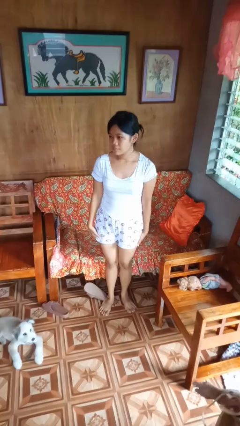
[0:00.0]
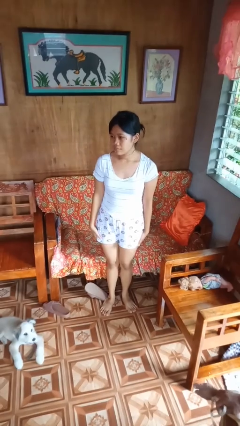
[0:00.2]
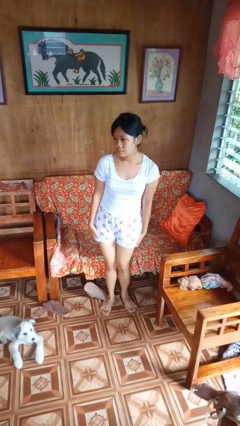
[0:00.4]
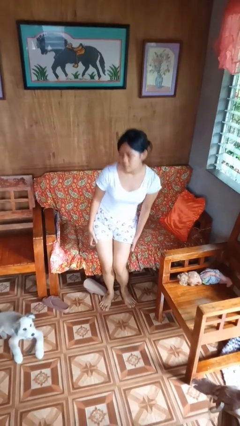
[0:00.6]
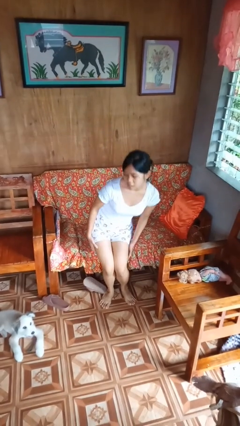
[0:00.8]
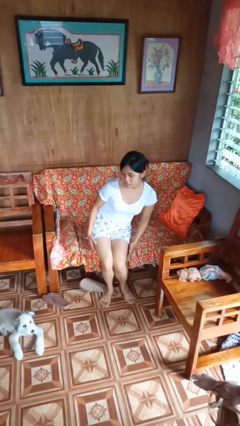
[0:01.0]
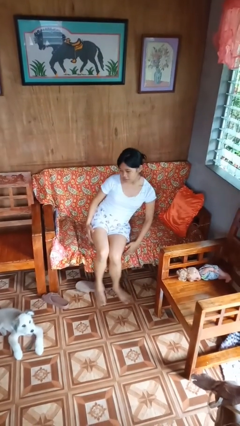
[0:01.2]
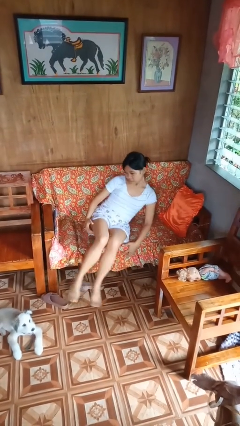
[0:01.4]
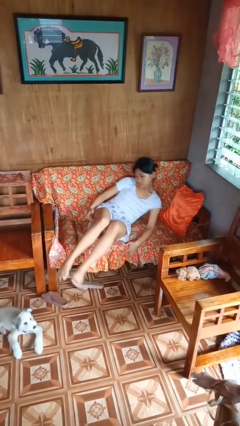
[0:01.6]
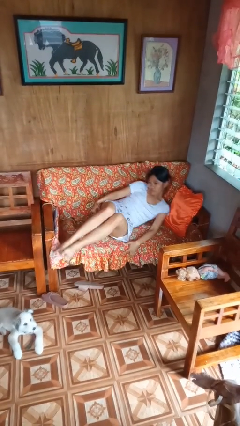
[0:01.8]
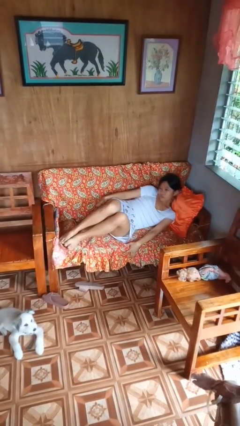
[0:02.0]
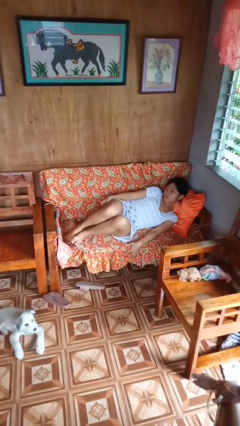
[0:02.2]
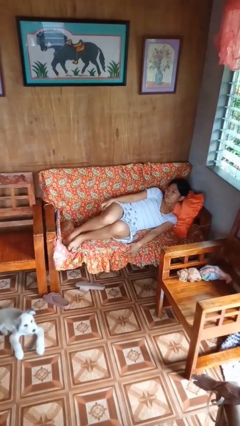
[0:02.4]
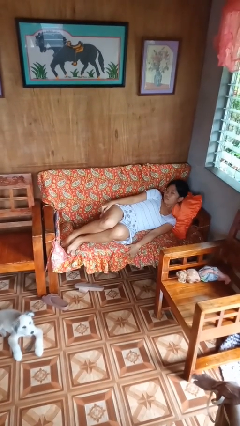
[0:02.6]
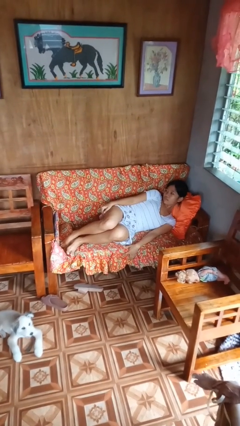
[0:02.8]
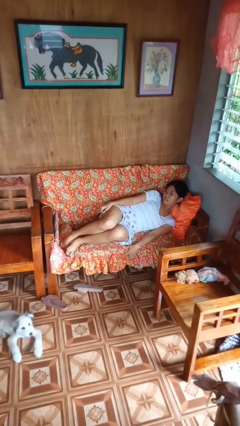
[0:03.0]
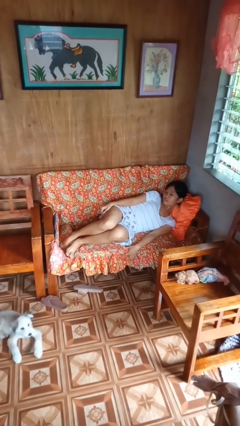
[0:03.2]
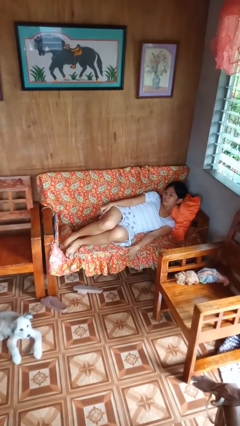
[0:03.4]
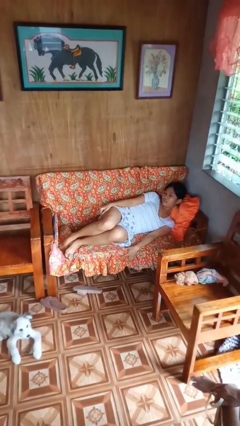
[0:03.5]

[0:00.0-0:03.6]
person lies down on couch

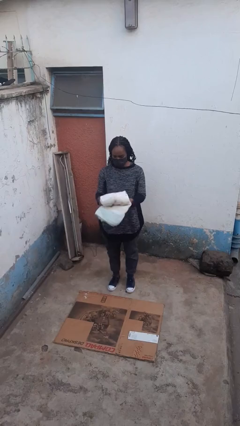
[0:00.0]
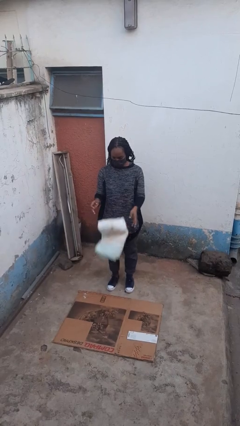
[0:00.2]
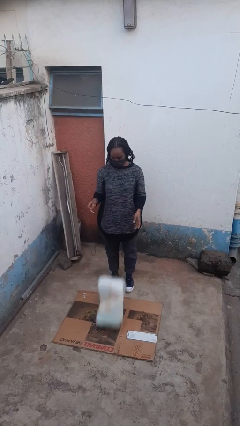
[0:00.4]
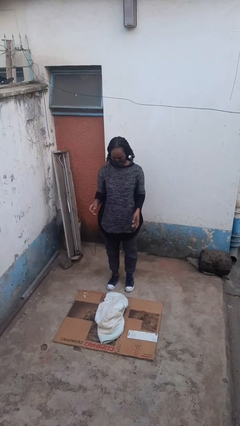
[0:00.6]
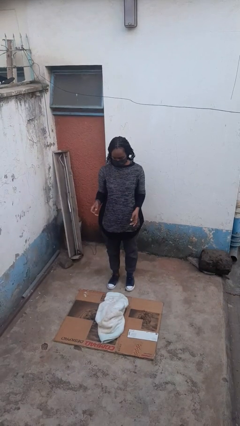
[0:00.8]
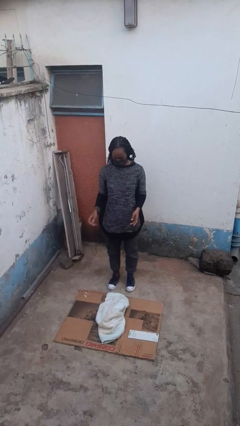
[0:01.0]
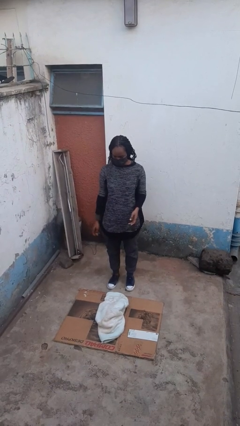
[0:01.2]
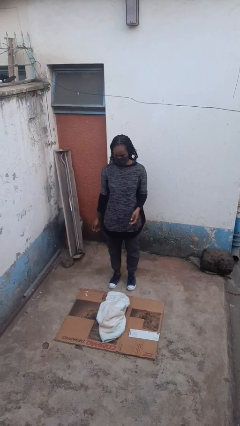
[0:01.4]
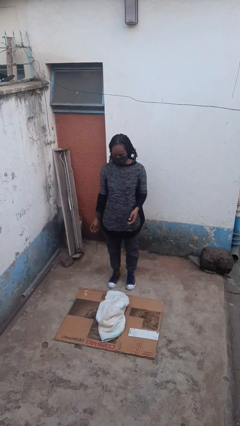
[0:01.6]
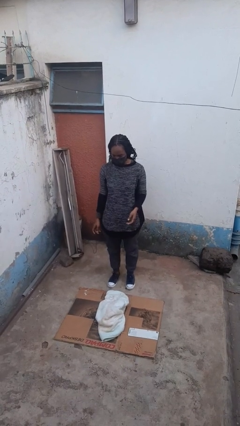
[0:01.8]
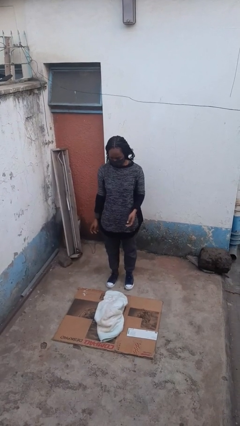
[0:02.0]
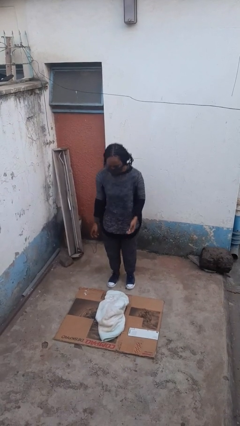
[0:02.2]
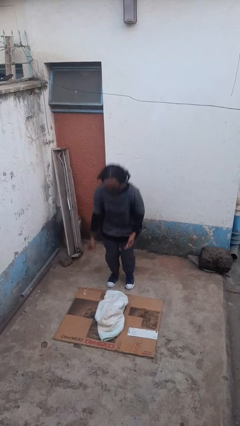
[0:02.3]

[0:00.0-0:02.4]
person drops object

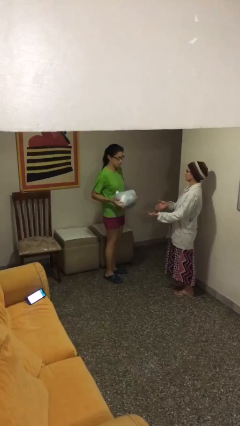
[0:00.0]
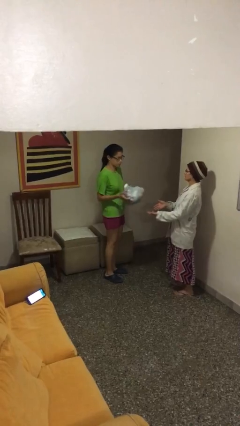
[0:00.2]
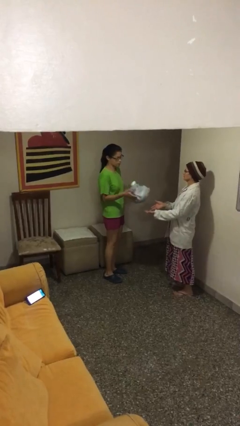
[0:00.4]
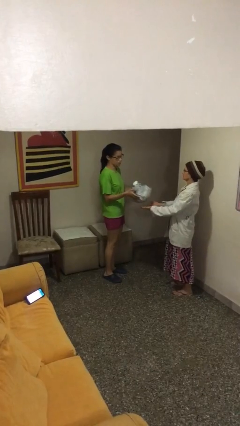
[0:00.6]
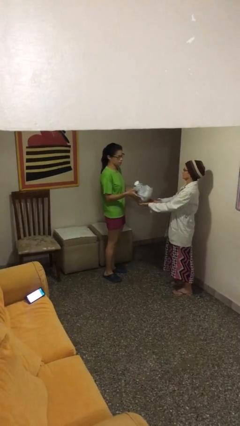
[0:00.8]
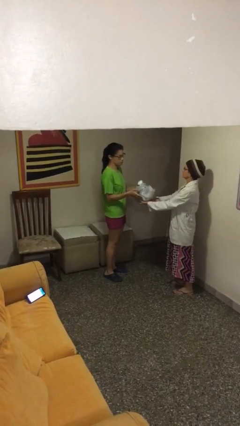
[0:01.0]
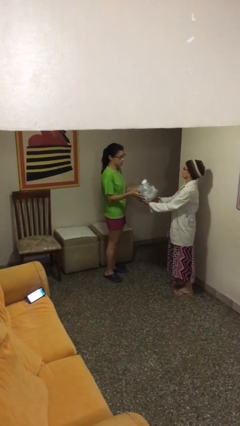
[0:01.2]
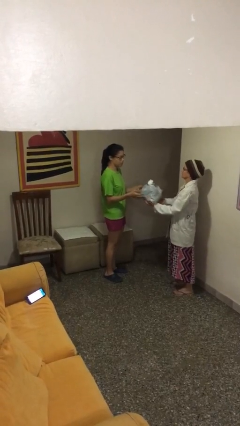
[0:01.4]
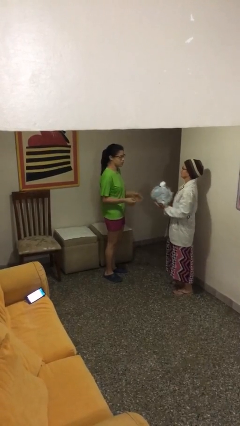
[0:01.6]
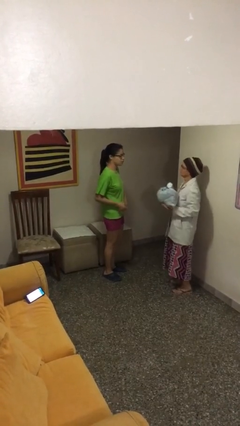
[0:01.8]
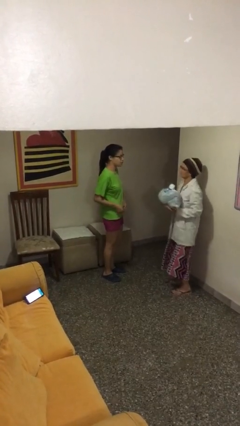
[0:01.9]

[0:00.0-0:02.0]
person transfers object to person

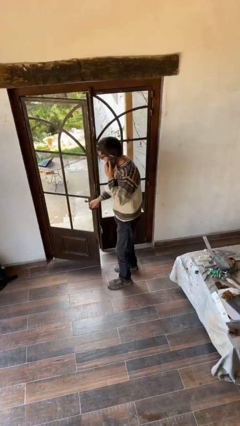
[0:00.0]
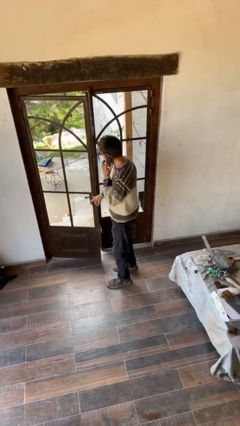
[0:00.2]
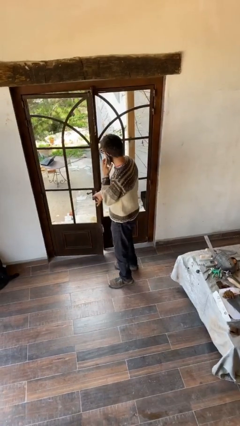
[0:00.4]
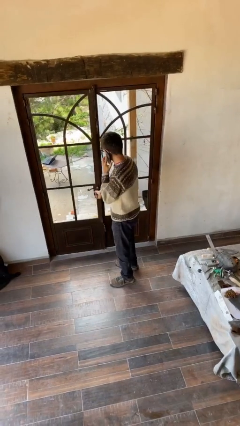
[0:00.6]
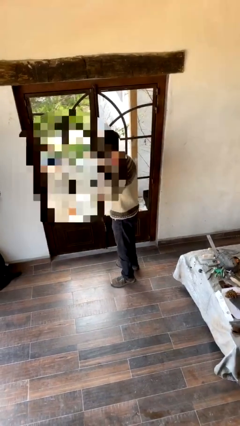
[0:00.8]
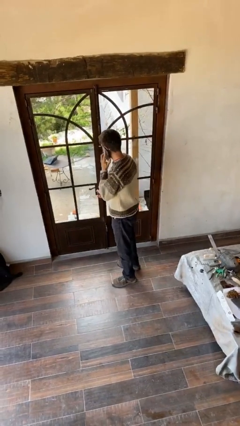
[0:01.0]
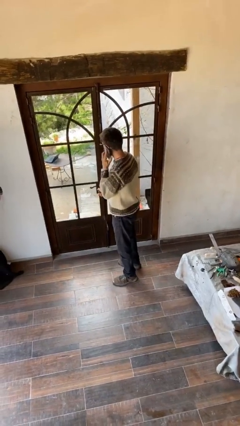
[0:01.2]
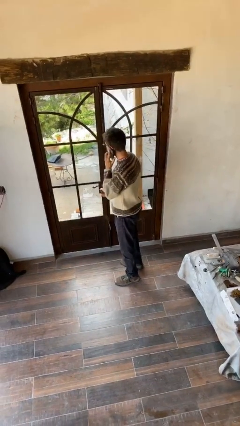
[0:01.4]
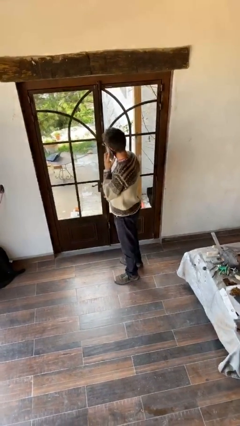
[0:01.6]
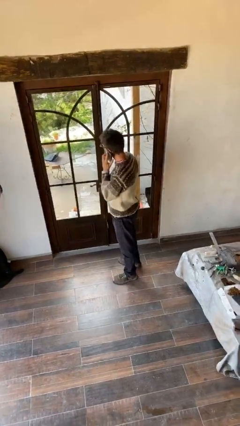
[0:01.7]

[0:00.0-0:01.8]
person closes facility door

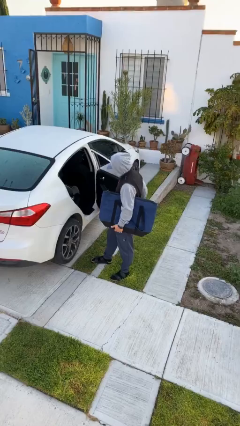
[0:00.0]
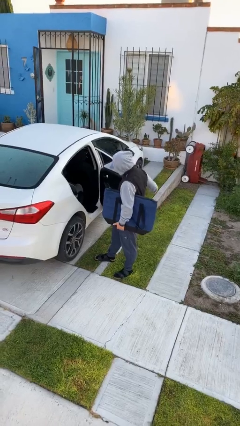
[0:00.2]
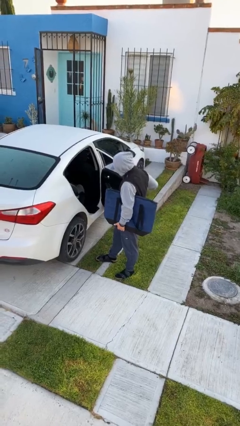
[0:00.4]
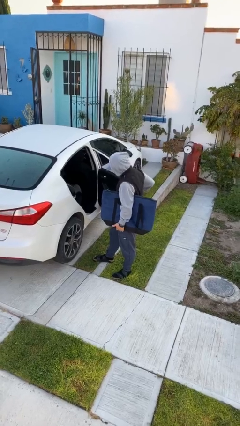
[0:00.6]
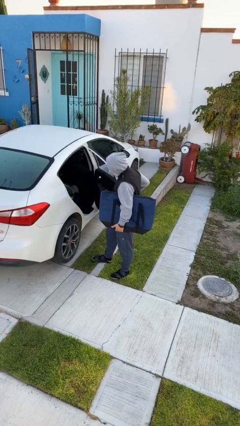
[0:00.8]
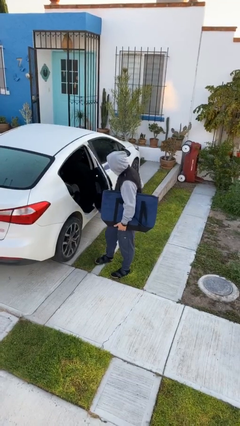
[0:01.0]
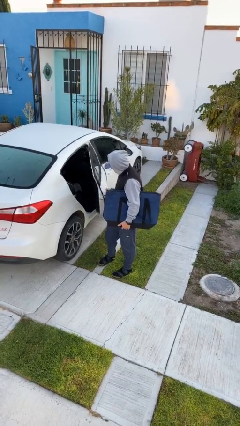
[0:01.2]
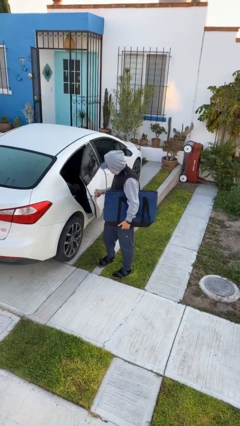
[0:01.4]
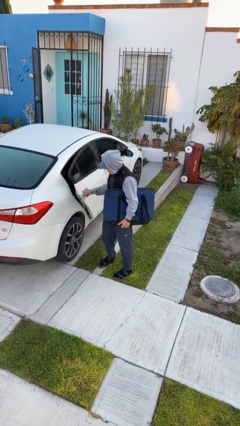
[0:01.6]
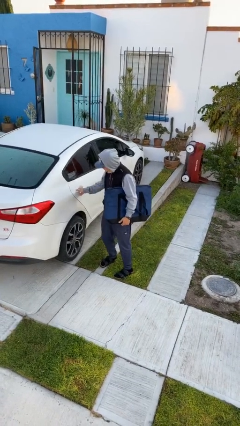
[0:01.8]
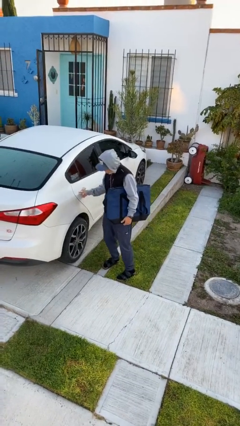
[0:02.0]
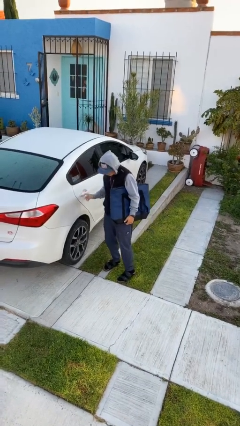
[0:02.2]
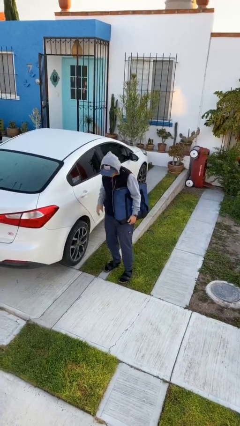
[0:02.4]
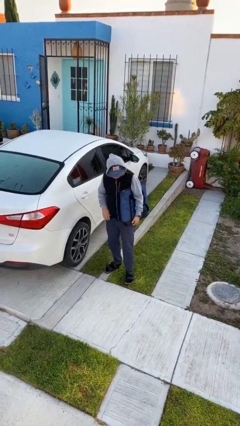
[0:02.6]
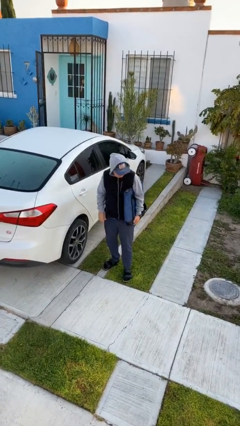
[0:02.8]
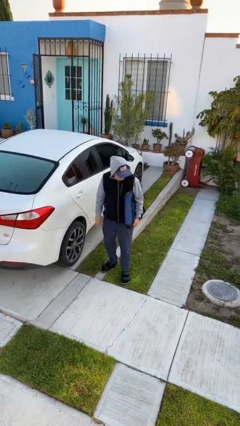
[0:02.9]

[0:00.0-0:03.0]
person closes car door

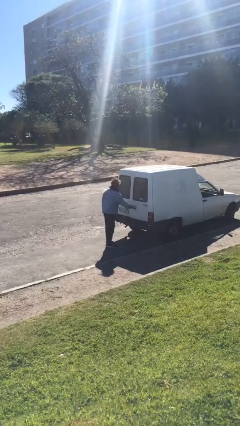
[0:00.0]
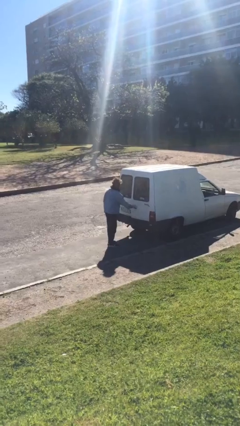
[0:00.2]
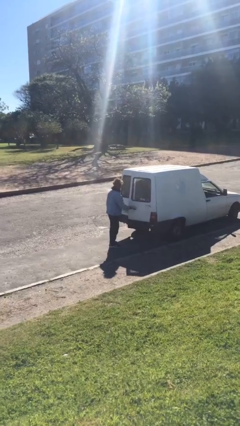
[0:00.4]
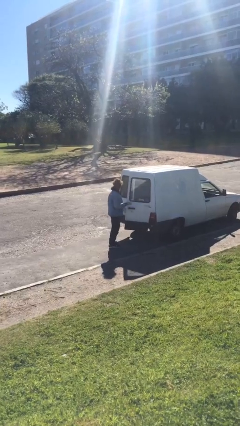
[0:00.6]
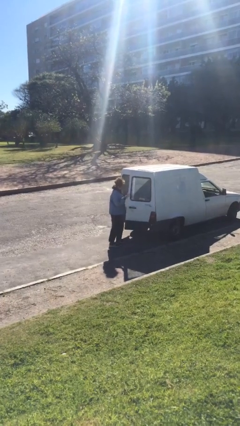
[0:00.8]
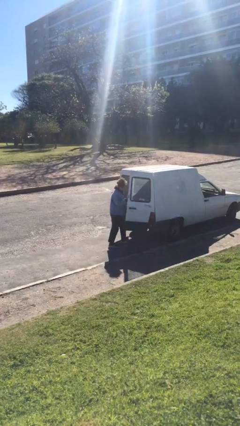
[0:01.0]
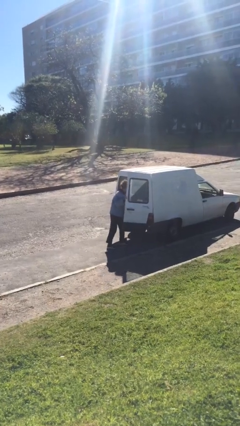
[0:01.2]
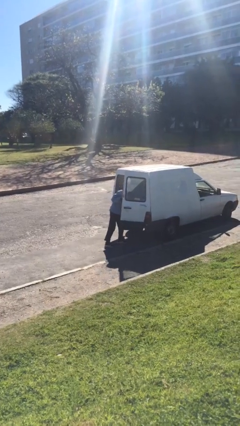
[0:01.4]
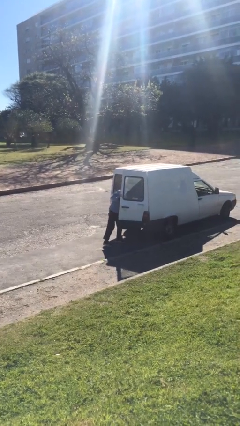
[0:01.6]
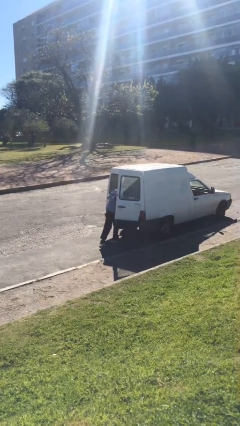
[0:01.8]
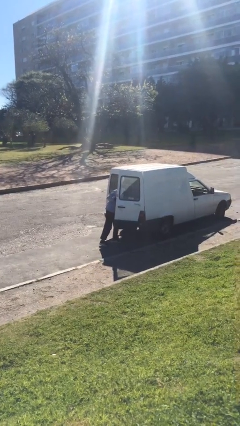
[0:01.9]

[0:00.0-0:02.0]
person opens car door

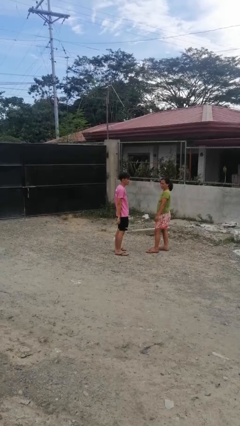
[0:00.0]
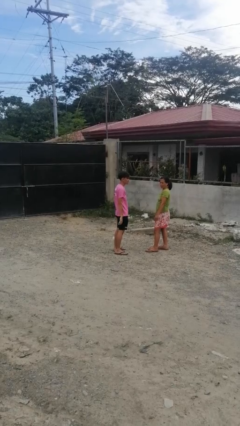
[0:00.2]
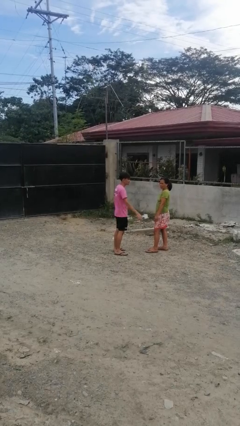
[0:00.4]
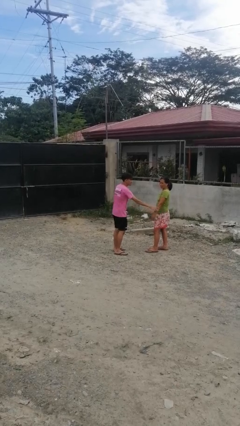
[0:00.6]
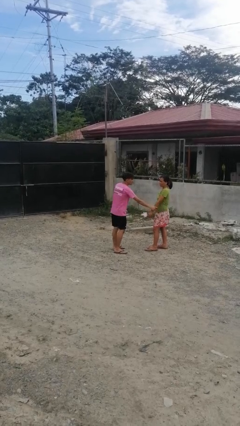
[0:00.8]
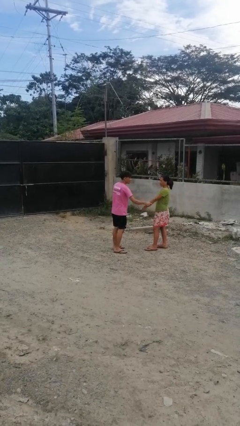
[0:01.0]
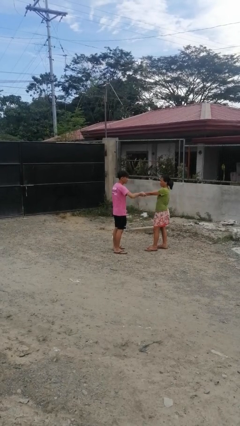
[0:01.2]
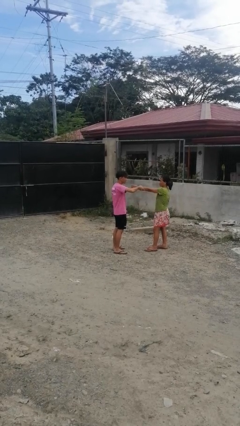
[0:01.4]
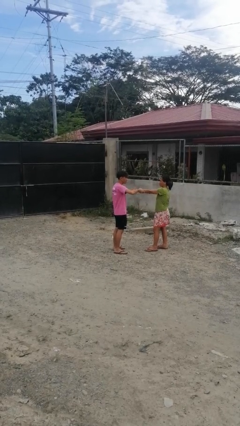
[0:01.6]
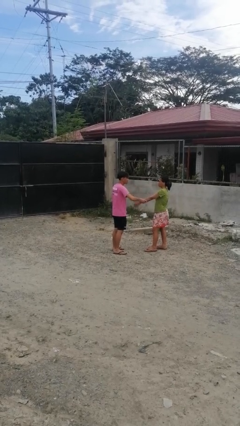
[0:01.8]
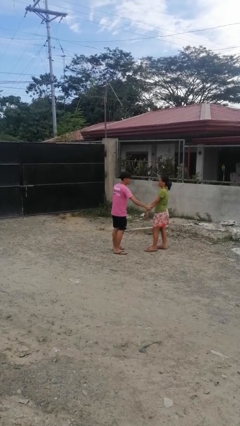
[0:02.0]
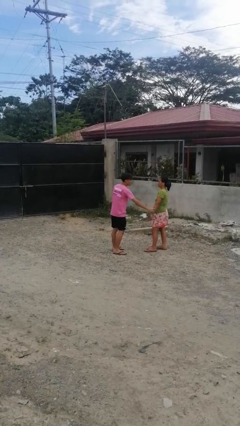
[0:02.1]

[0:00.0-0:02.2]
person grabs person by forearm

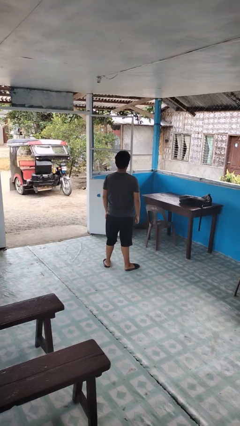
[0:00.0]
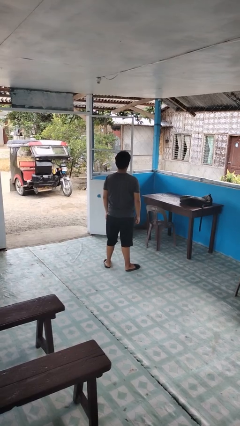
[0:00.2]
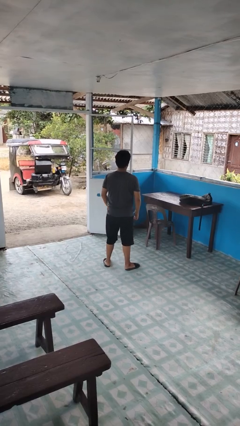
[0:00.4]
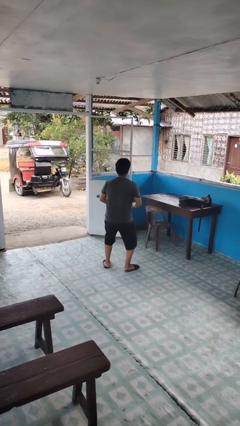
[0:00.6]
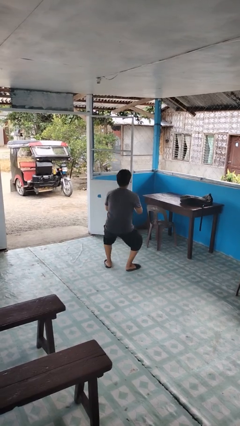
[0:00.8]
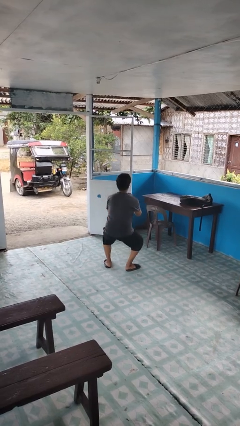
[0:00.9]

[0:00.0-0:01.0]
person squats
